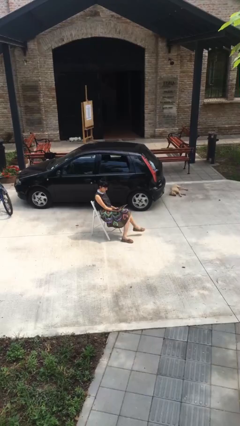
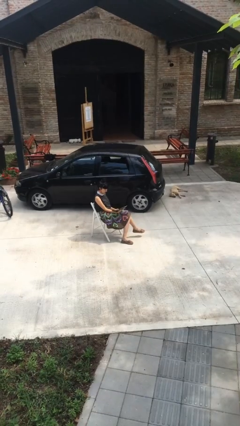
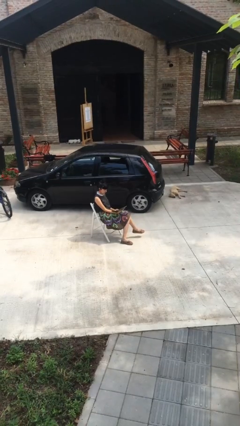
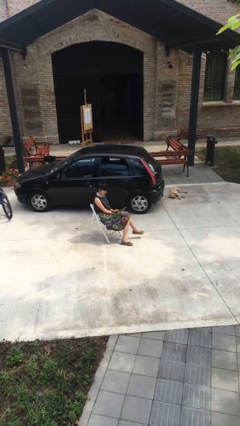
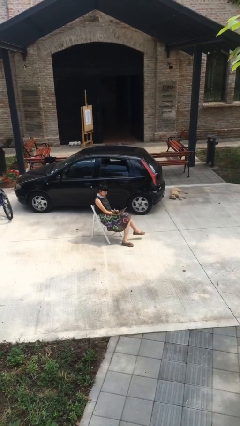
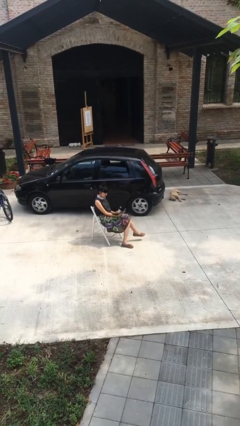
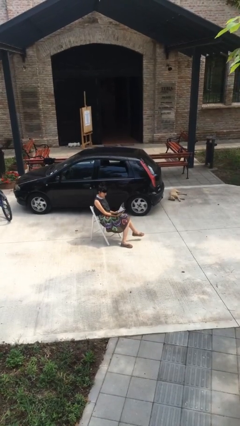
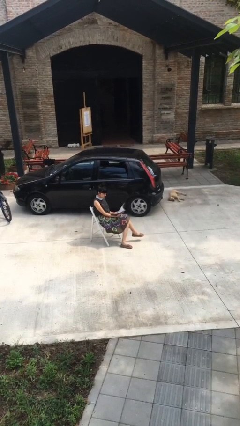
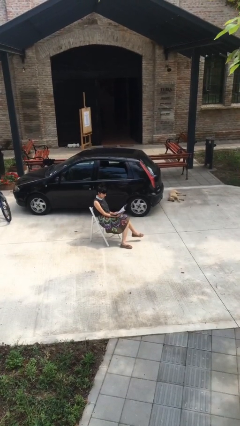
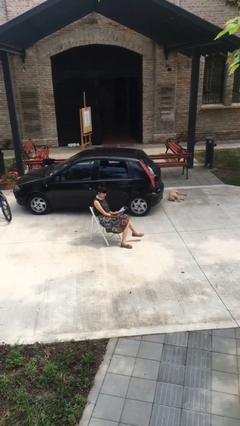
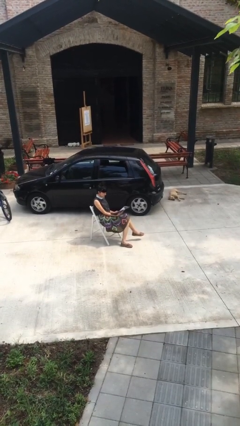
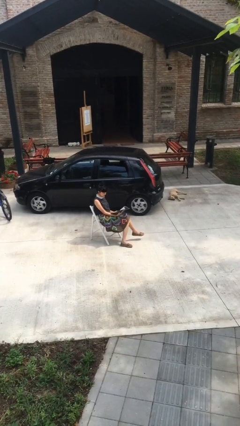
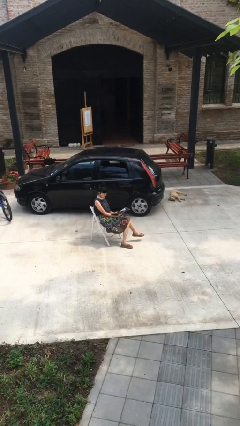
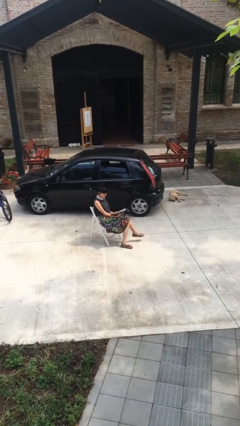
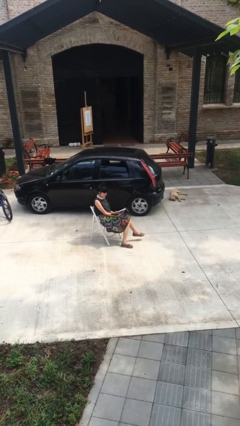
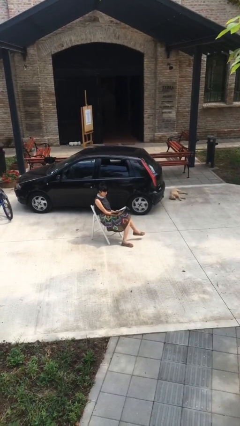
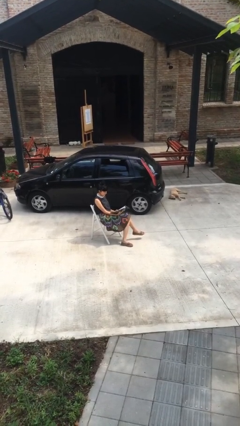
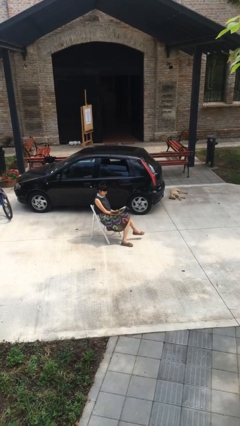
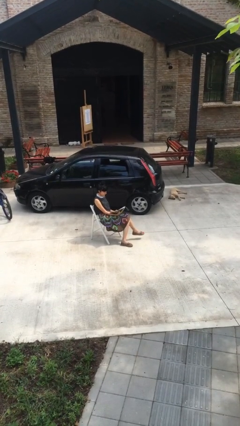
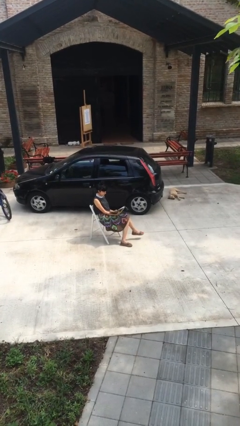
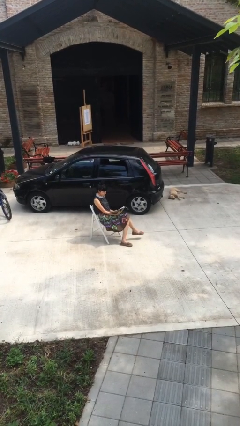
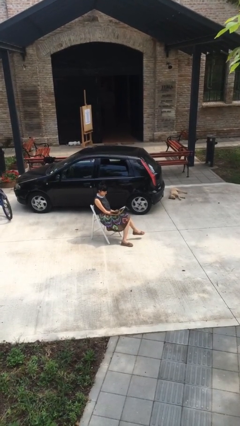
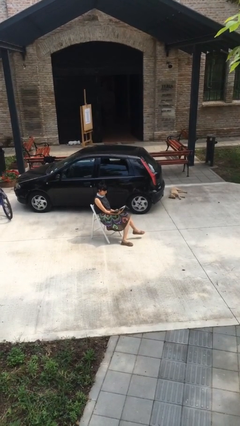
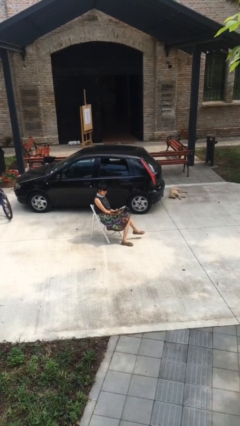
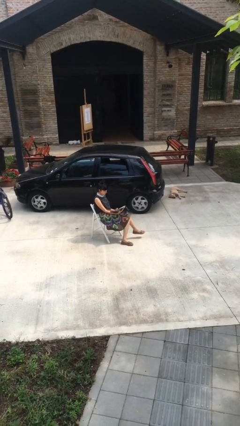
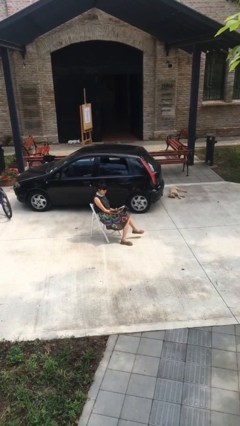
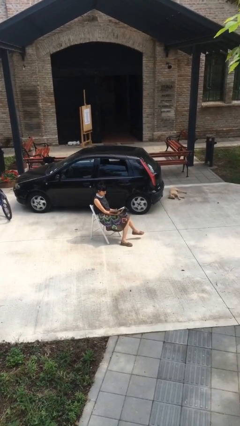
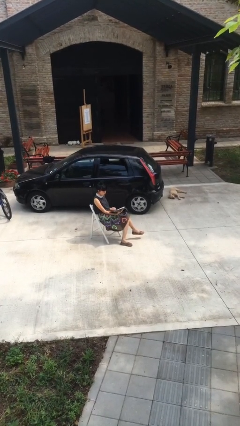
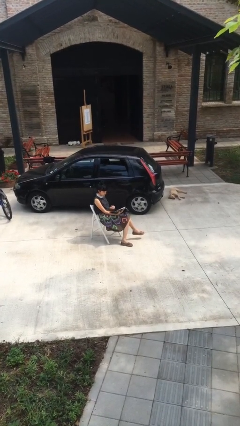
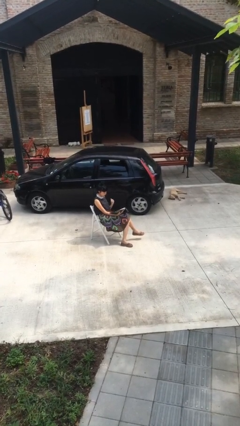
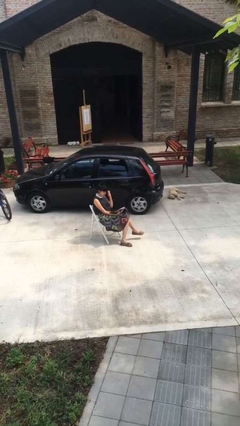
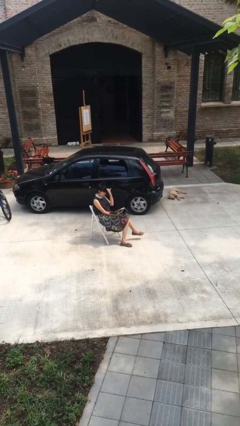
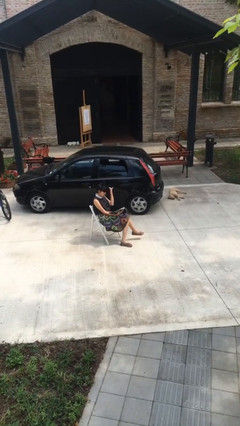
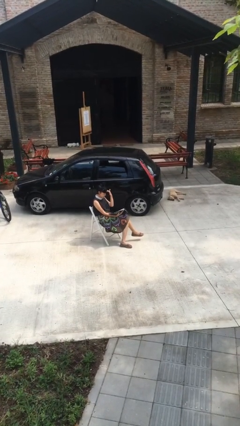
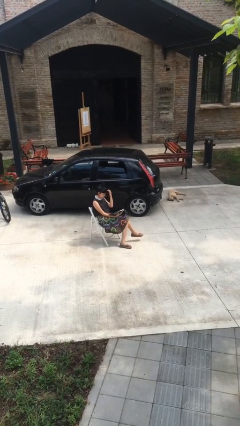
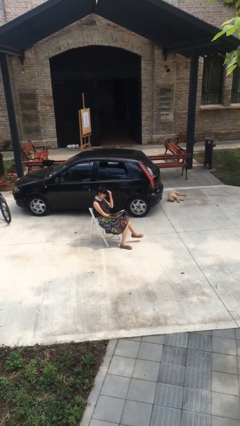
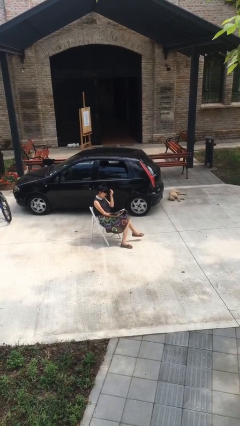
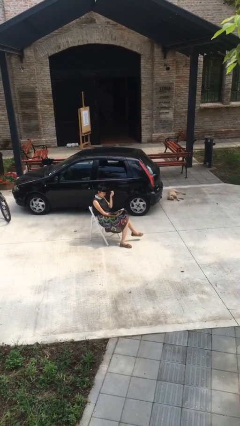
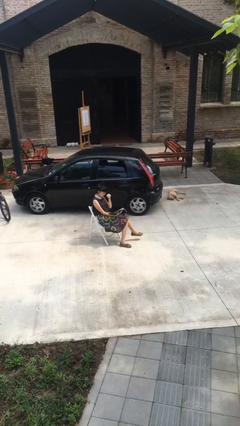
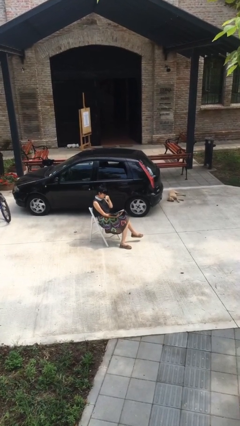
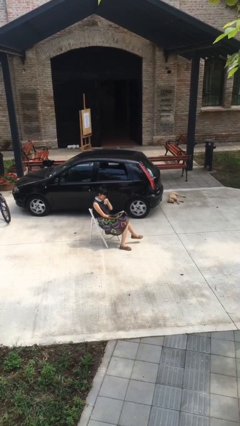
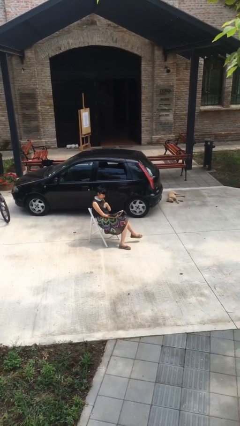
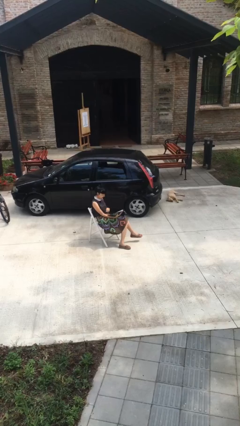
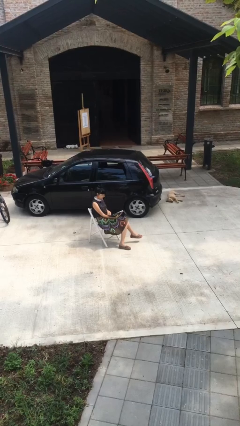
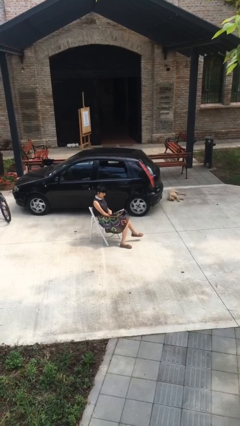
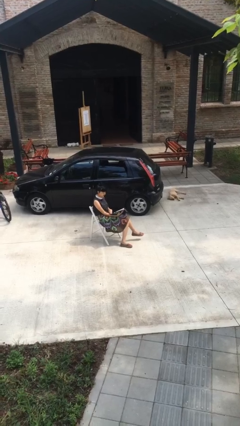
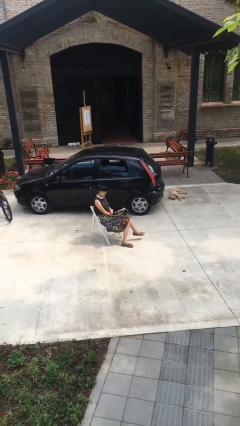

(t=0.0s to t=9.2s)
person reads document

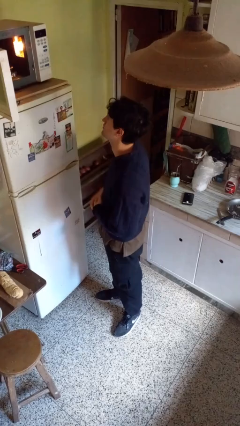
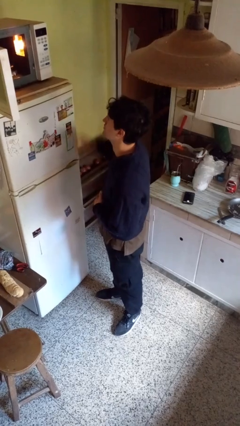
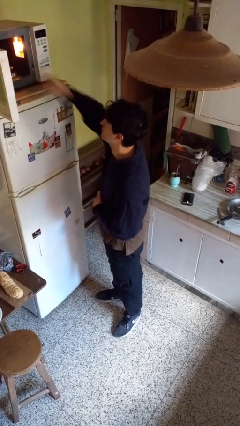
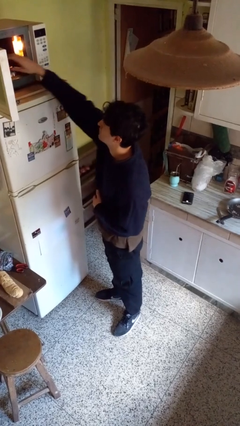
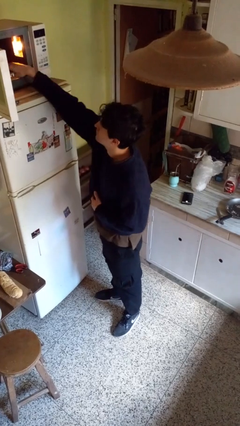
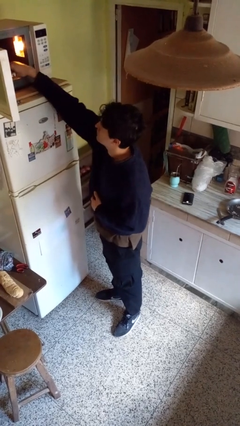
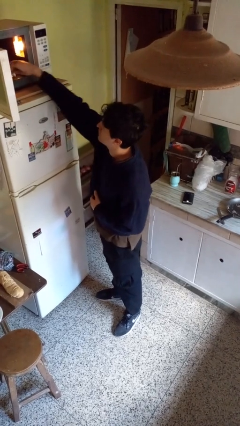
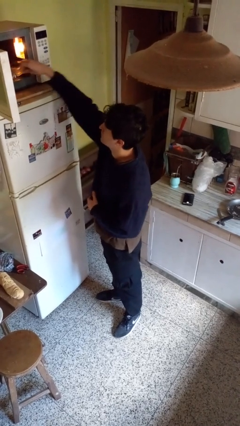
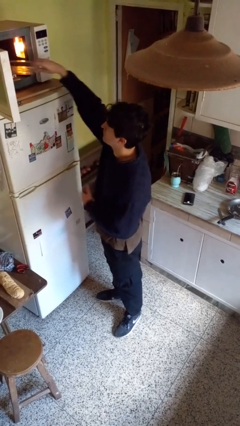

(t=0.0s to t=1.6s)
person takes object from microwave

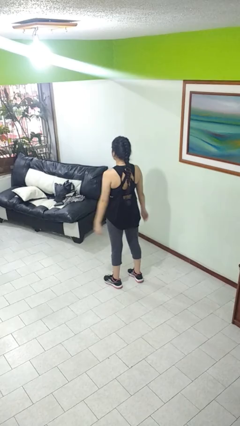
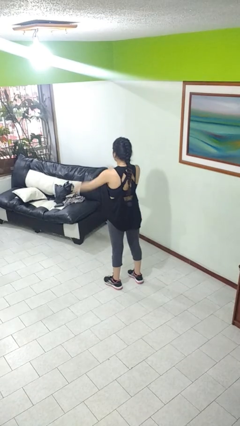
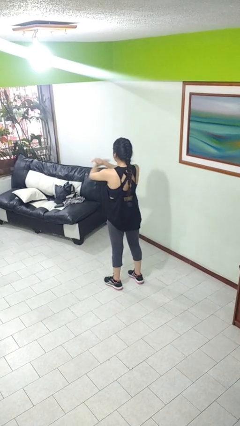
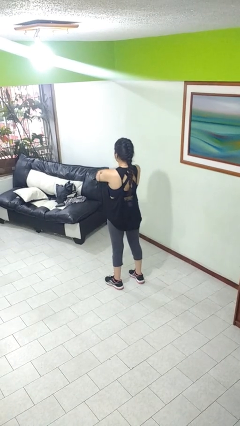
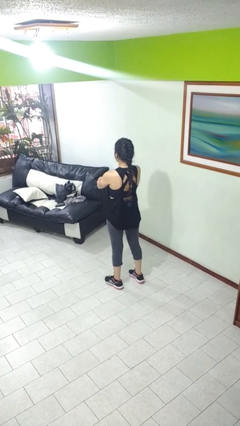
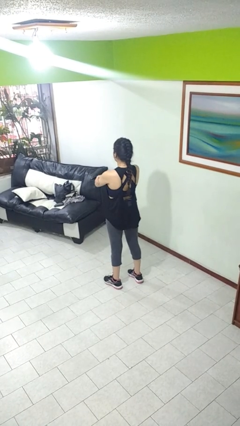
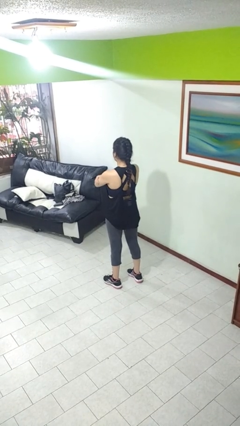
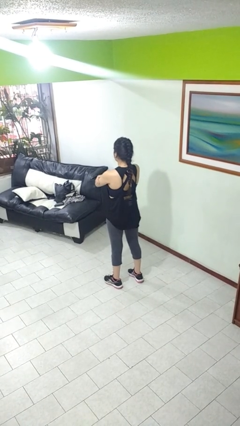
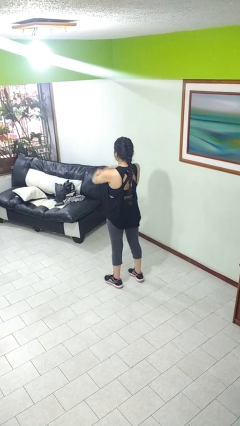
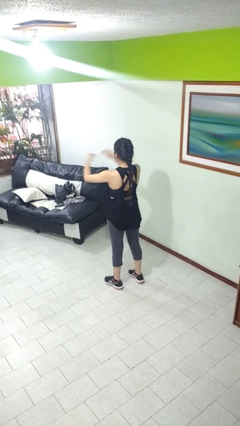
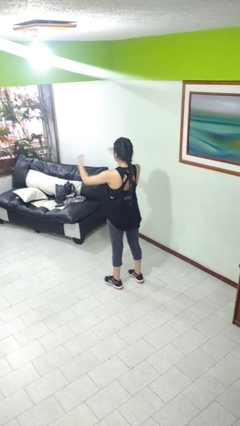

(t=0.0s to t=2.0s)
person crosses arms

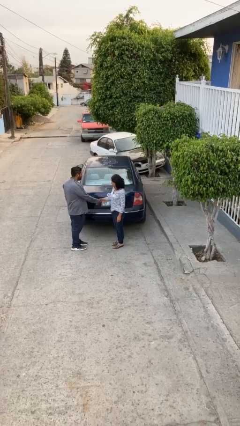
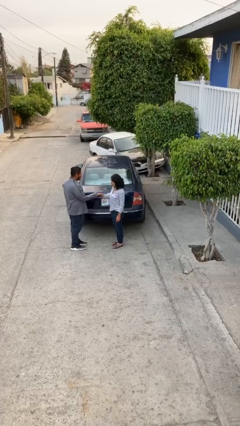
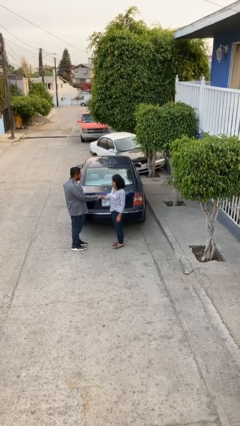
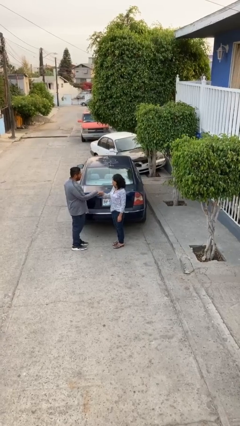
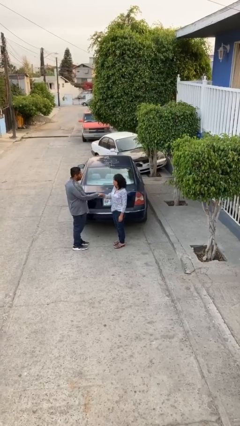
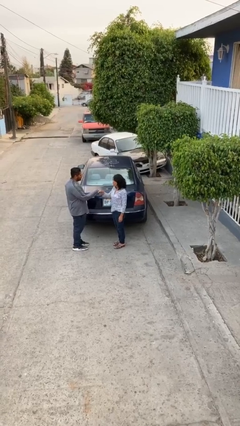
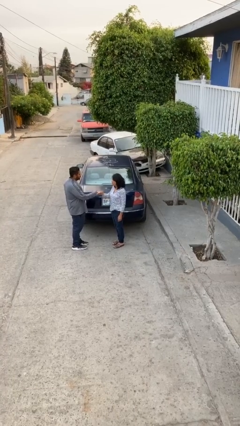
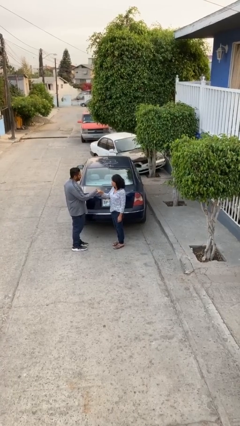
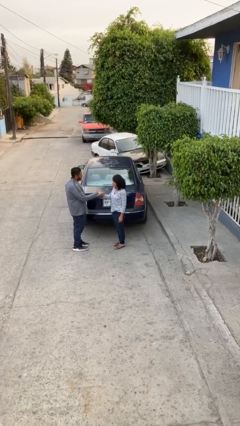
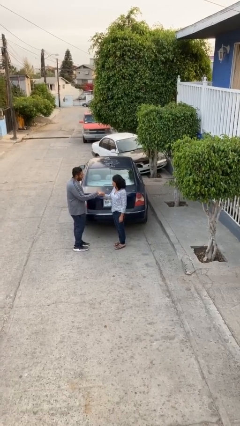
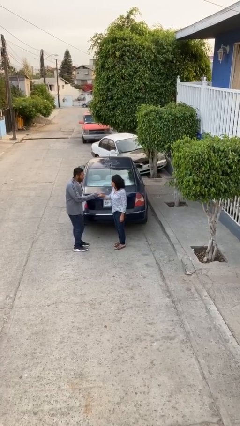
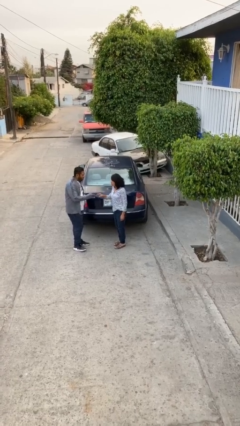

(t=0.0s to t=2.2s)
person shakes hand

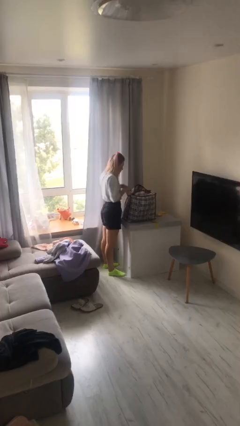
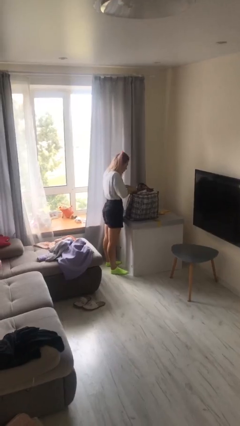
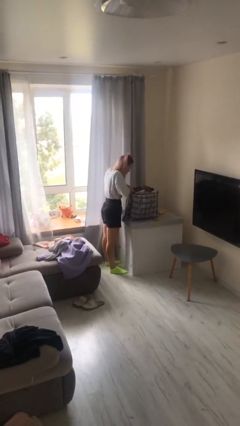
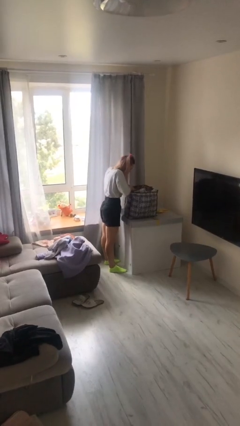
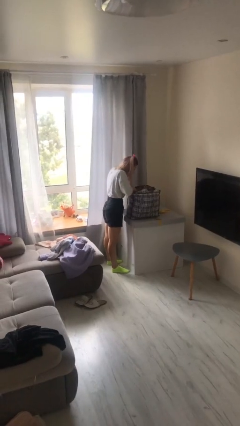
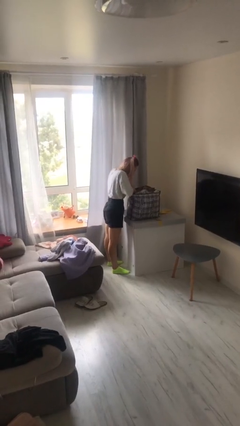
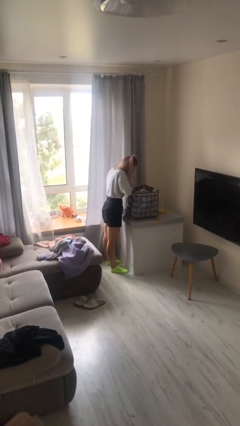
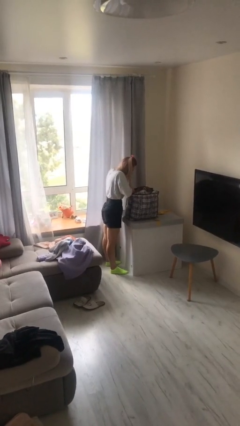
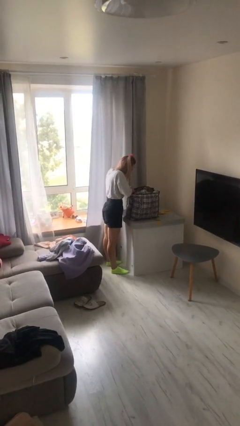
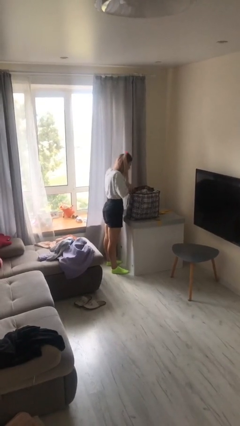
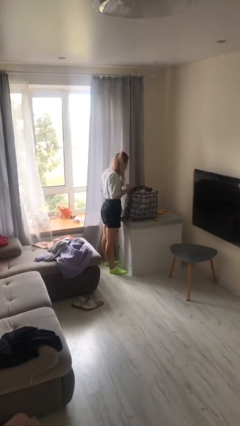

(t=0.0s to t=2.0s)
person searches in bag

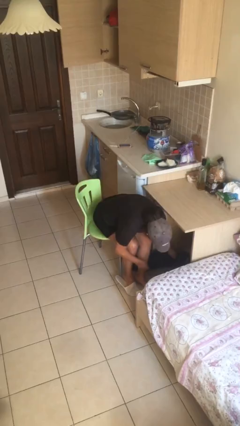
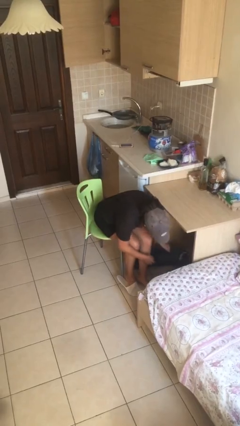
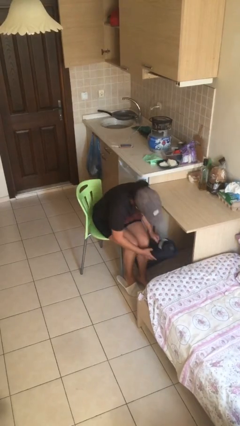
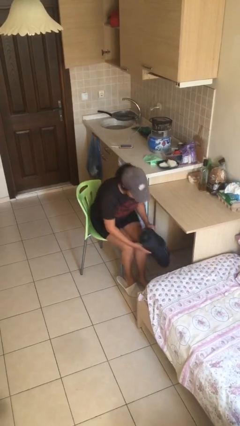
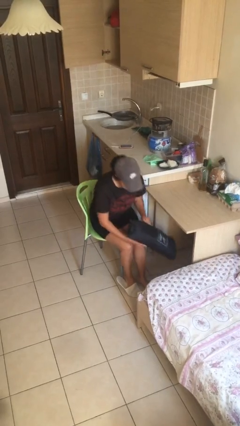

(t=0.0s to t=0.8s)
person picks up object from floor
